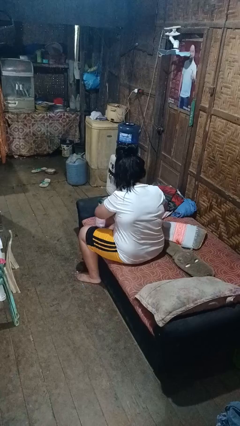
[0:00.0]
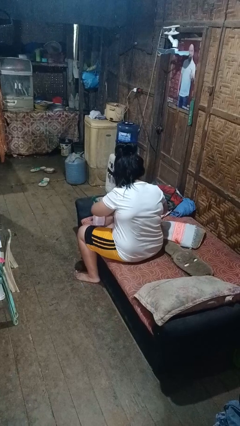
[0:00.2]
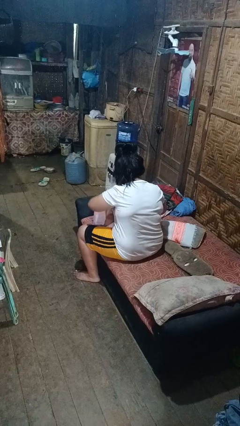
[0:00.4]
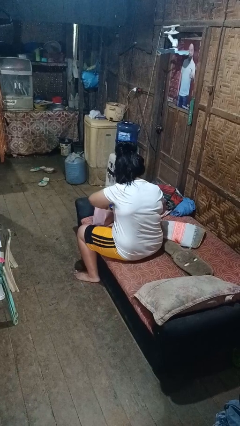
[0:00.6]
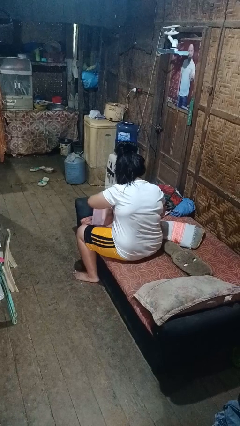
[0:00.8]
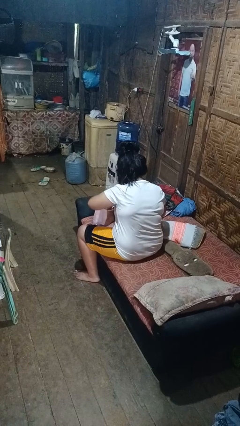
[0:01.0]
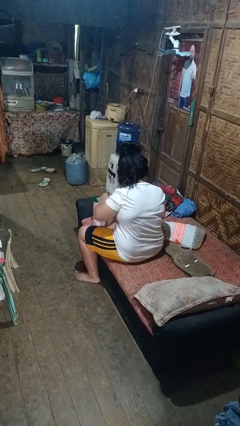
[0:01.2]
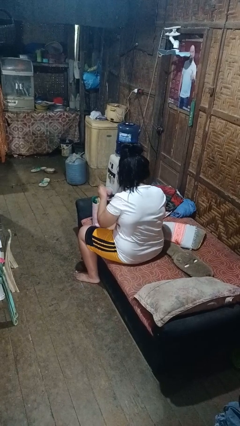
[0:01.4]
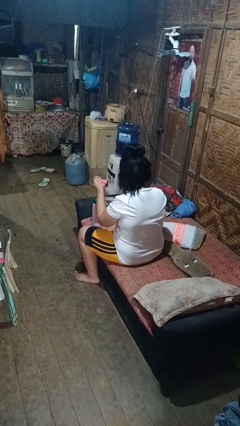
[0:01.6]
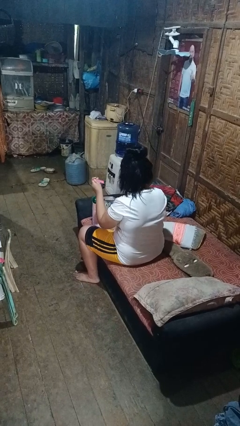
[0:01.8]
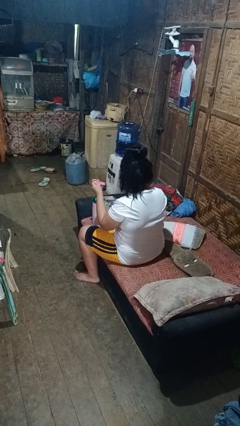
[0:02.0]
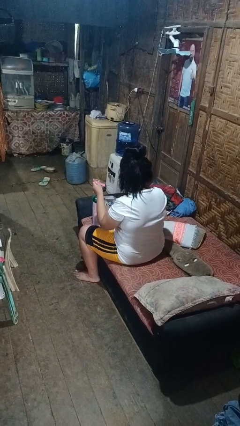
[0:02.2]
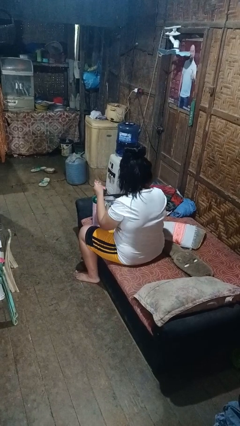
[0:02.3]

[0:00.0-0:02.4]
person searches in bag

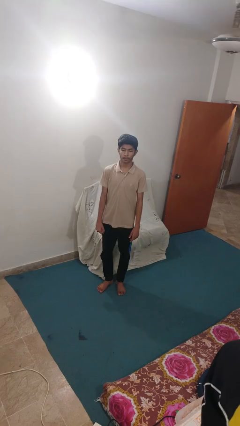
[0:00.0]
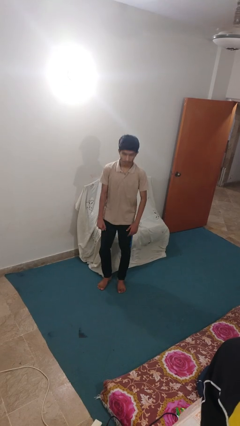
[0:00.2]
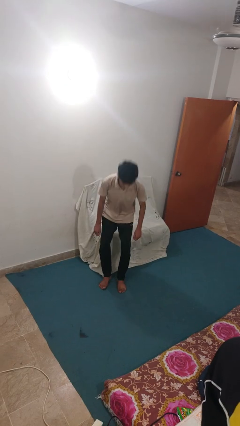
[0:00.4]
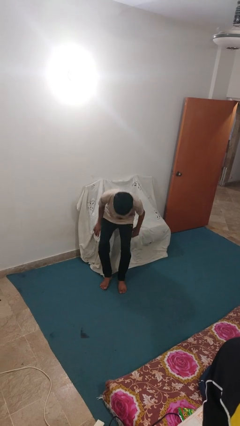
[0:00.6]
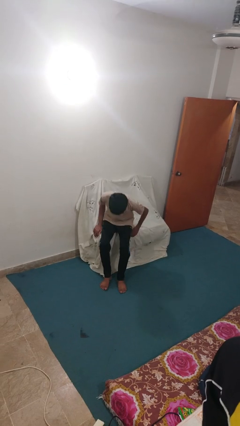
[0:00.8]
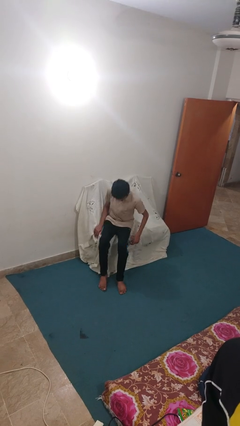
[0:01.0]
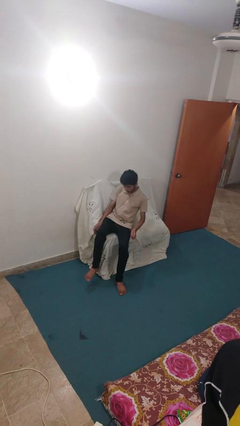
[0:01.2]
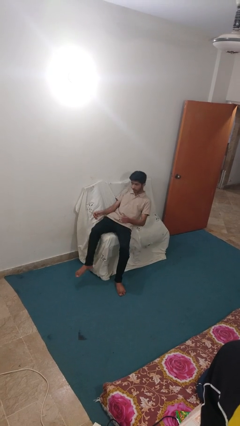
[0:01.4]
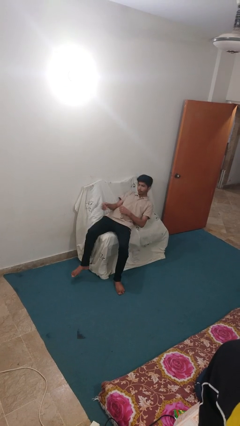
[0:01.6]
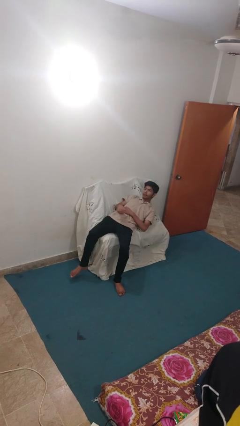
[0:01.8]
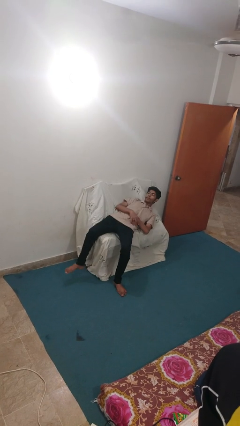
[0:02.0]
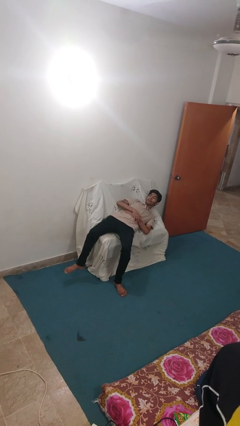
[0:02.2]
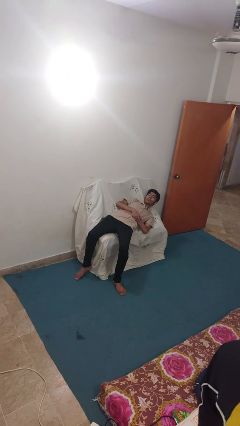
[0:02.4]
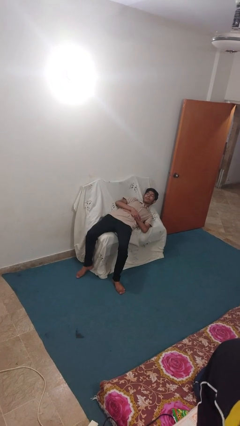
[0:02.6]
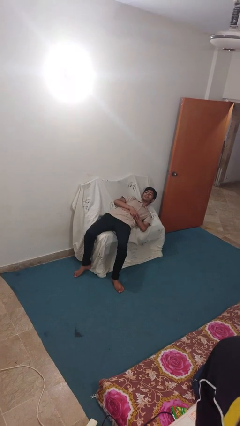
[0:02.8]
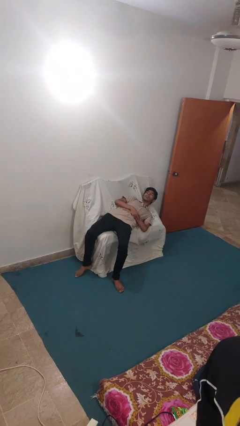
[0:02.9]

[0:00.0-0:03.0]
person lies down on couch

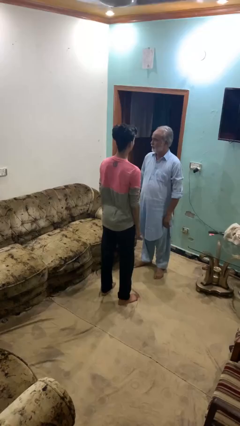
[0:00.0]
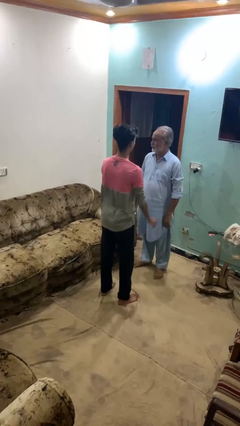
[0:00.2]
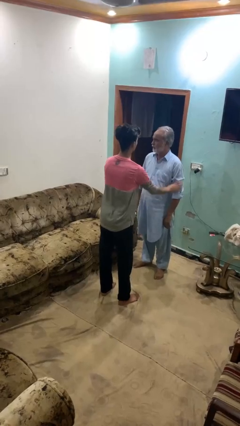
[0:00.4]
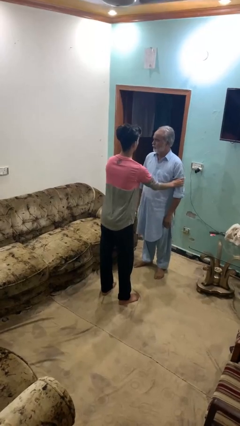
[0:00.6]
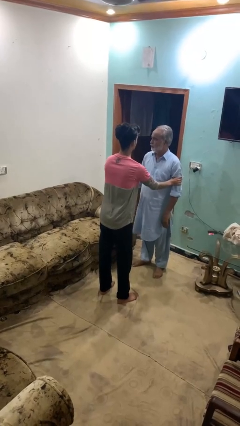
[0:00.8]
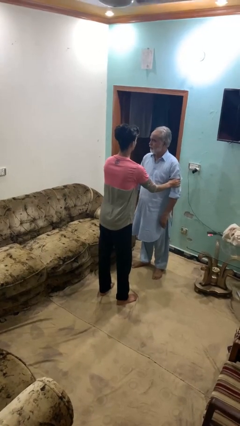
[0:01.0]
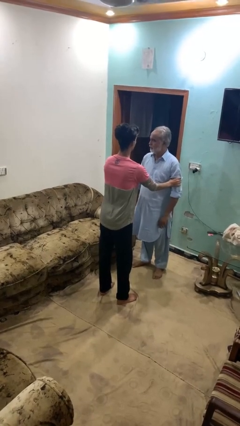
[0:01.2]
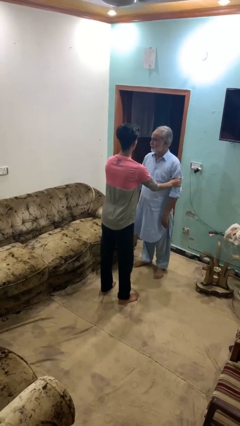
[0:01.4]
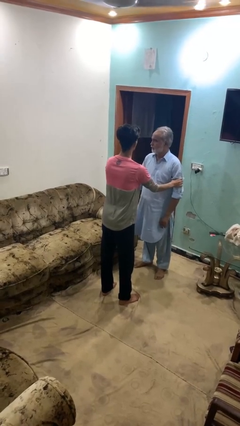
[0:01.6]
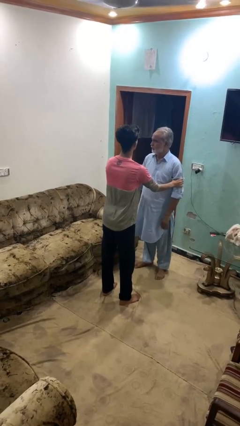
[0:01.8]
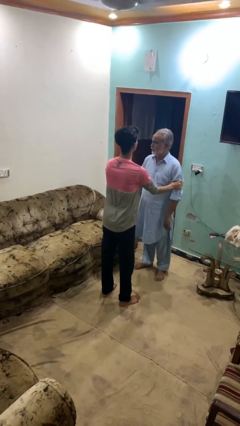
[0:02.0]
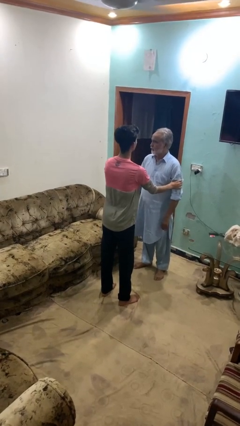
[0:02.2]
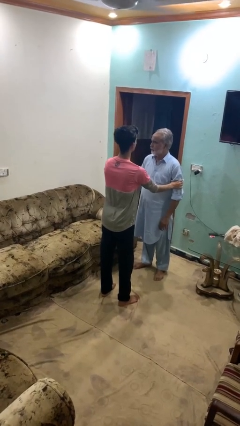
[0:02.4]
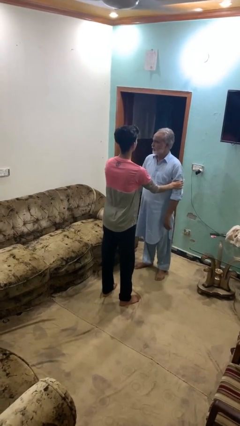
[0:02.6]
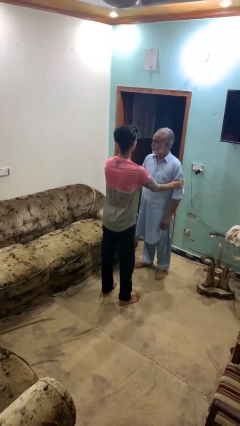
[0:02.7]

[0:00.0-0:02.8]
person grabs person by bicep

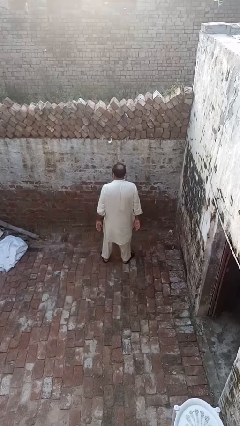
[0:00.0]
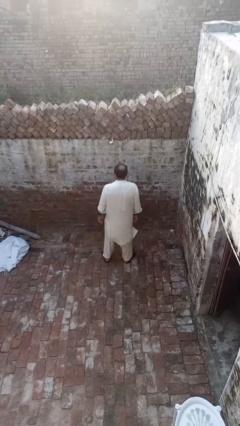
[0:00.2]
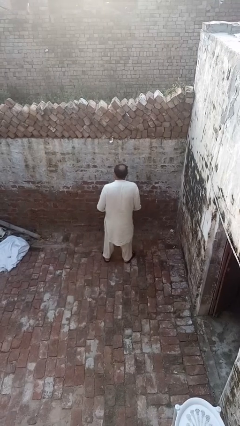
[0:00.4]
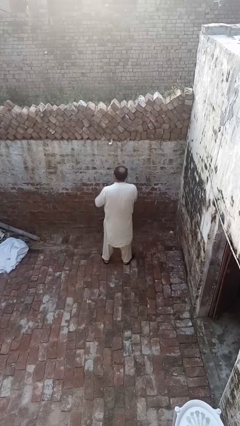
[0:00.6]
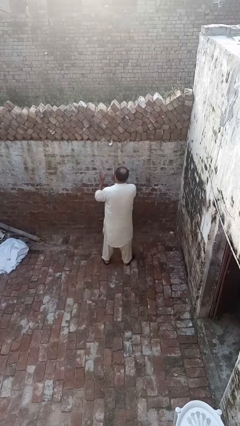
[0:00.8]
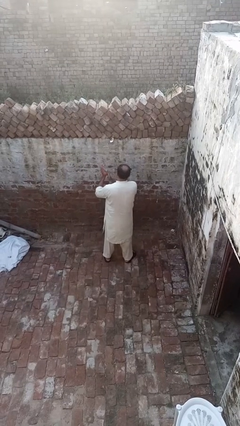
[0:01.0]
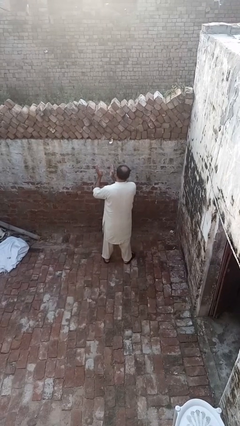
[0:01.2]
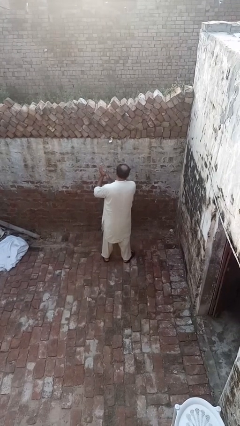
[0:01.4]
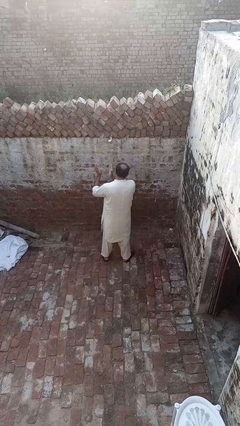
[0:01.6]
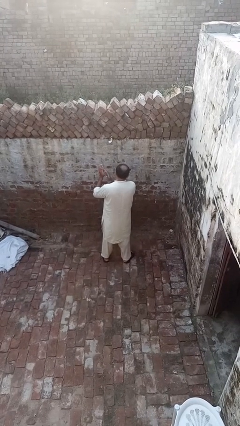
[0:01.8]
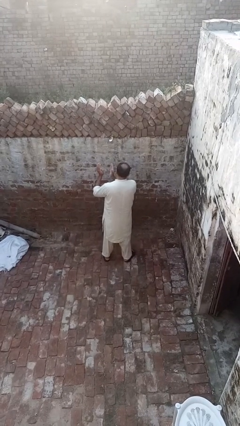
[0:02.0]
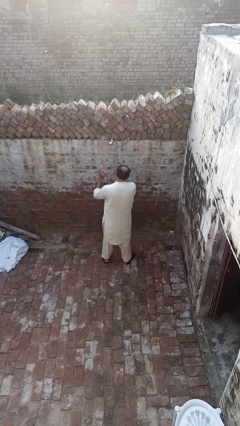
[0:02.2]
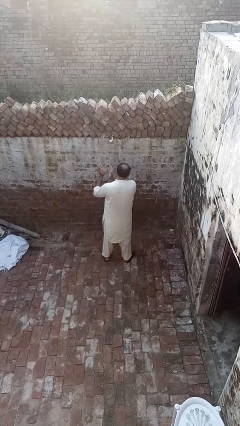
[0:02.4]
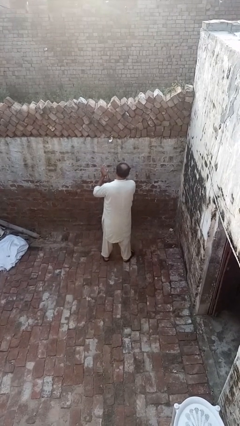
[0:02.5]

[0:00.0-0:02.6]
person claps hands

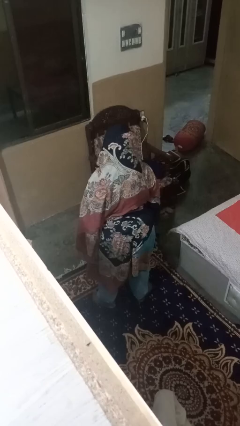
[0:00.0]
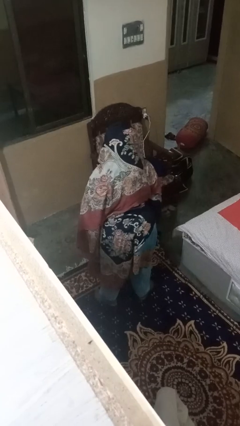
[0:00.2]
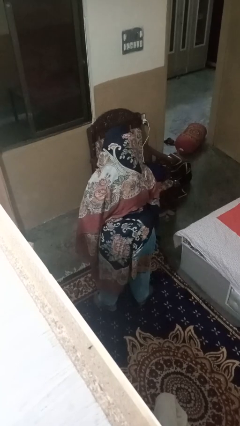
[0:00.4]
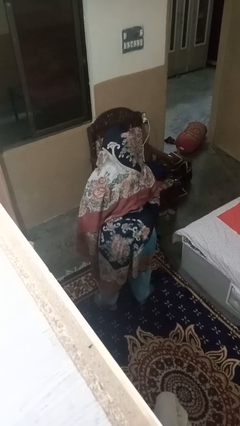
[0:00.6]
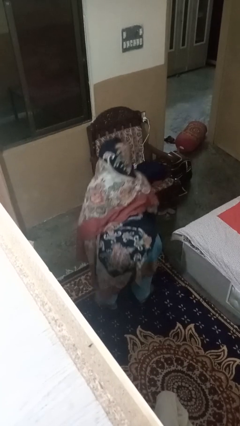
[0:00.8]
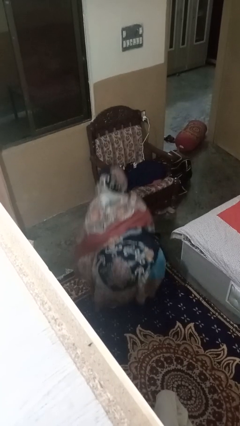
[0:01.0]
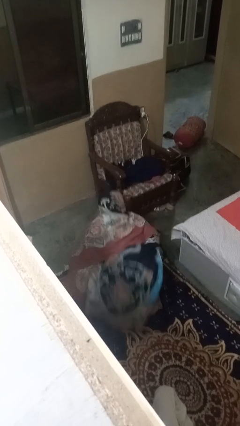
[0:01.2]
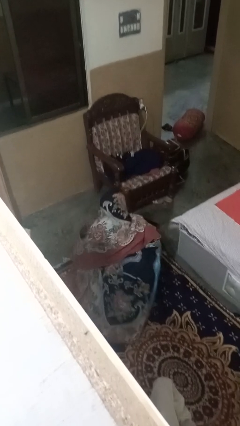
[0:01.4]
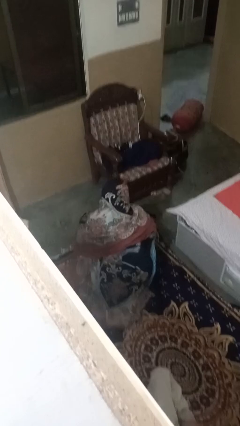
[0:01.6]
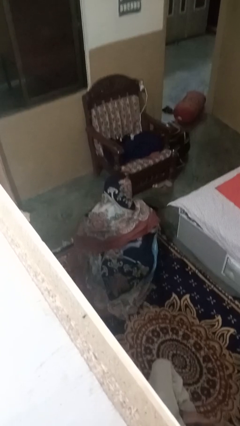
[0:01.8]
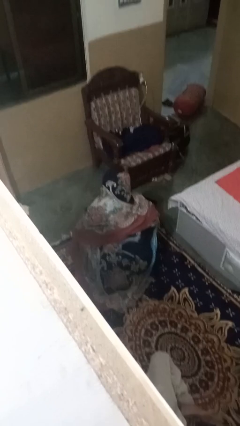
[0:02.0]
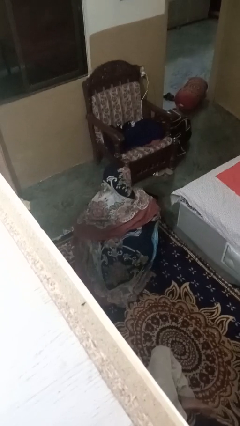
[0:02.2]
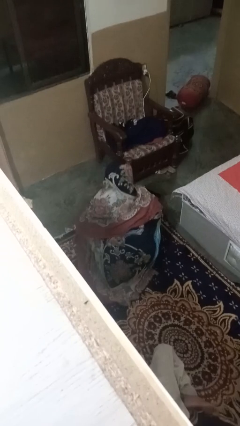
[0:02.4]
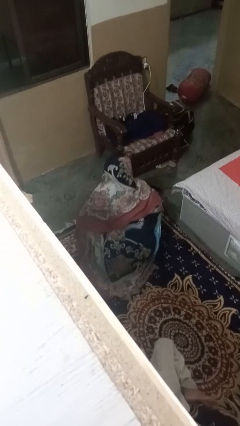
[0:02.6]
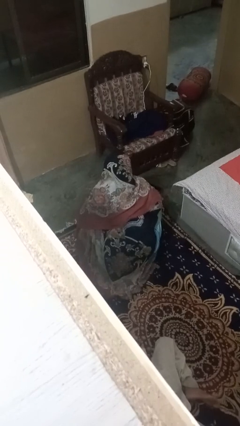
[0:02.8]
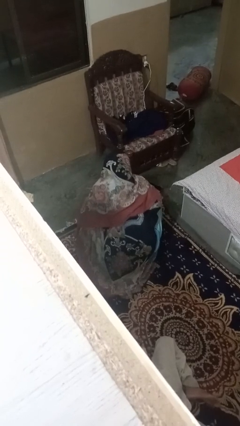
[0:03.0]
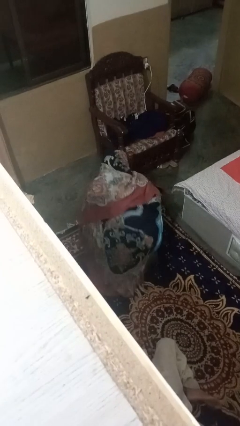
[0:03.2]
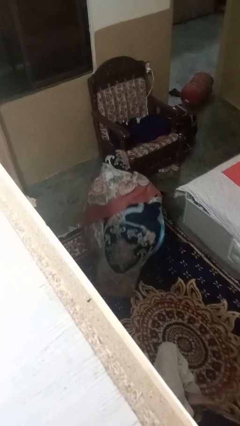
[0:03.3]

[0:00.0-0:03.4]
person squats

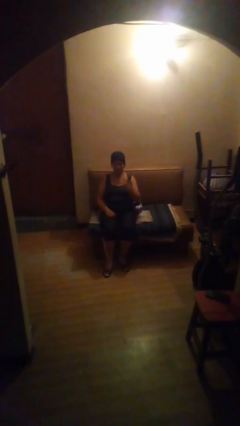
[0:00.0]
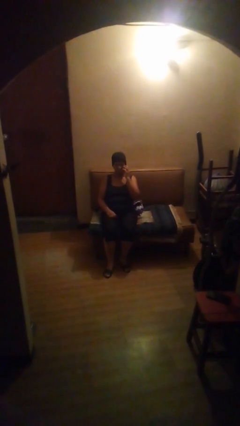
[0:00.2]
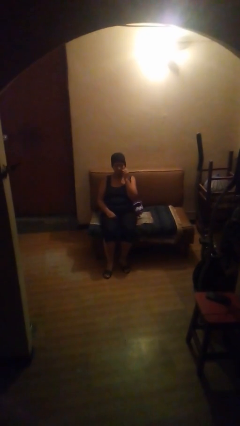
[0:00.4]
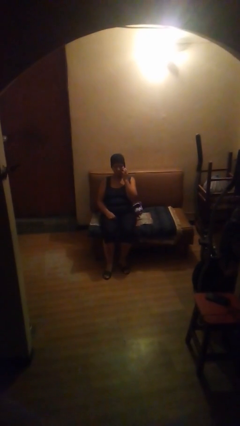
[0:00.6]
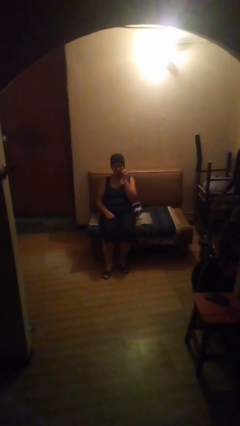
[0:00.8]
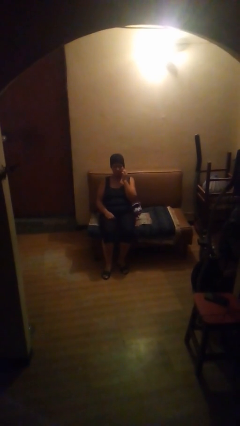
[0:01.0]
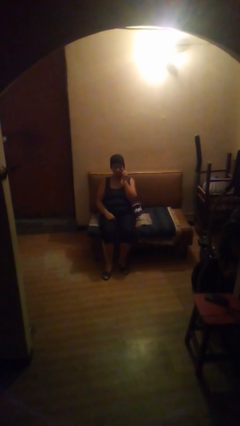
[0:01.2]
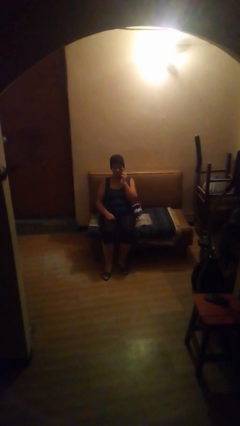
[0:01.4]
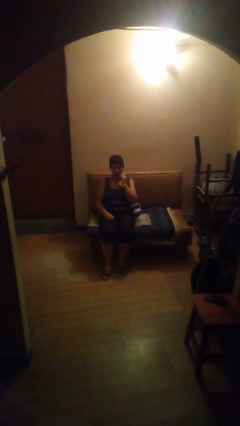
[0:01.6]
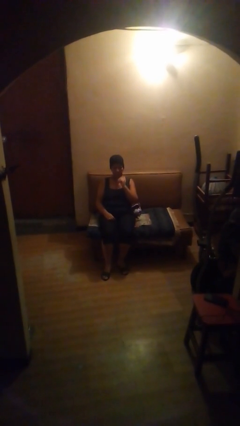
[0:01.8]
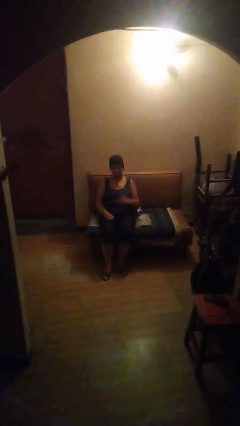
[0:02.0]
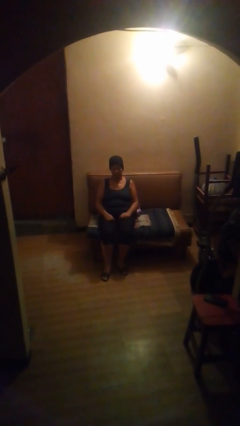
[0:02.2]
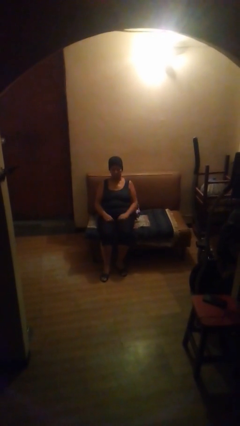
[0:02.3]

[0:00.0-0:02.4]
person scratches face

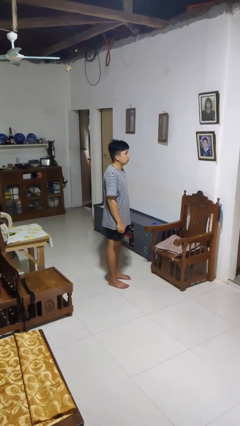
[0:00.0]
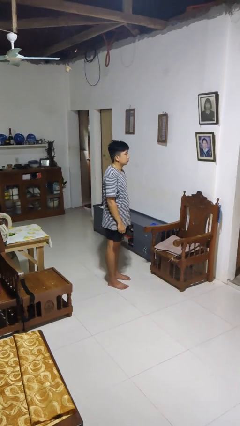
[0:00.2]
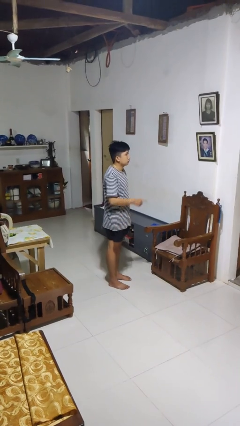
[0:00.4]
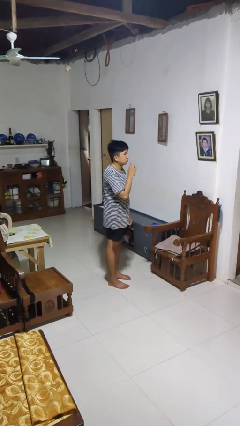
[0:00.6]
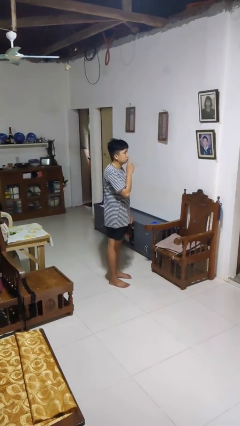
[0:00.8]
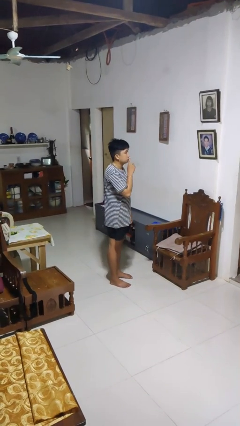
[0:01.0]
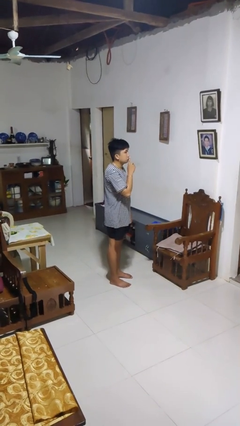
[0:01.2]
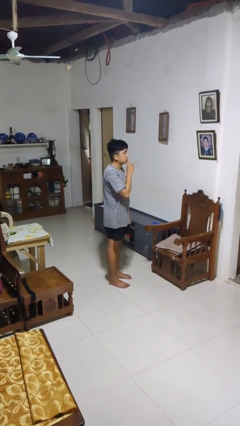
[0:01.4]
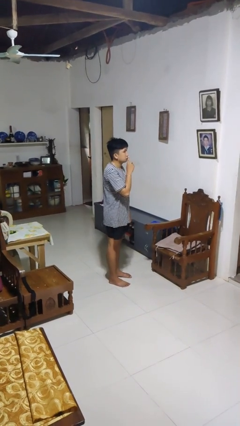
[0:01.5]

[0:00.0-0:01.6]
person gestures be quiet
